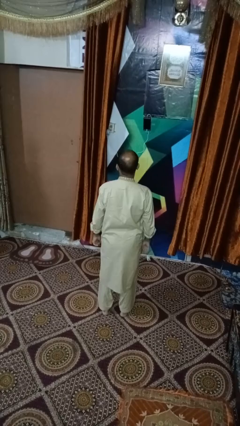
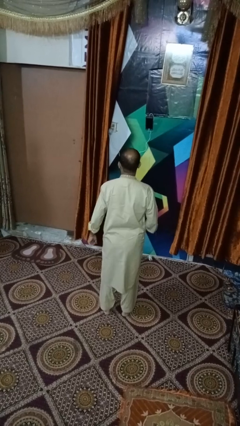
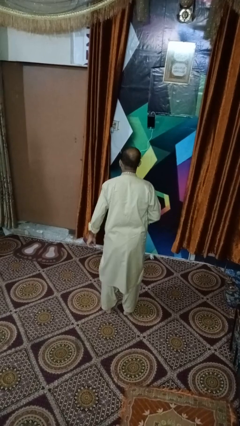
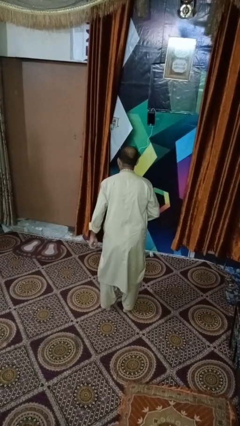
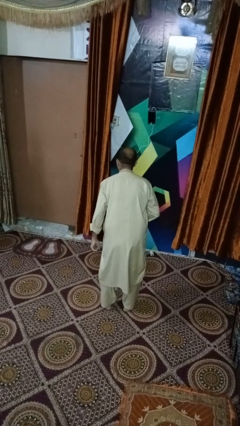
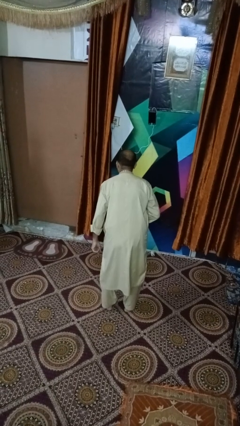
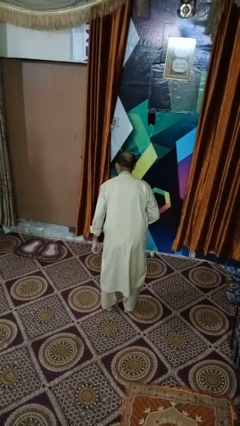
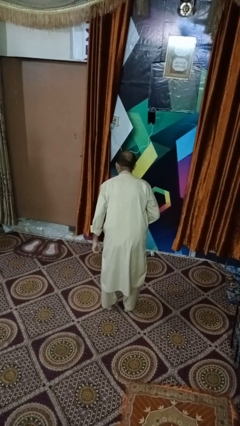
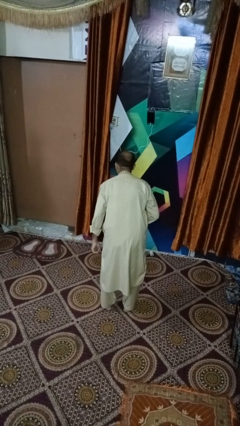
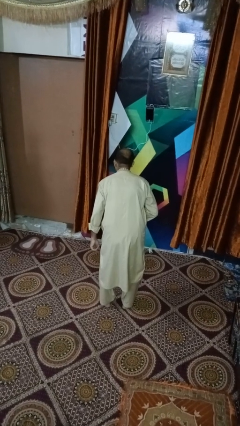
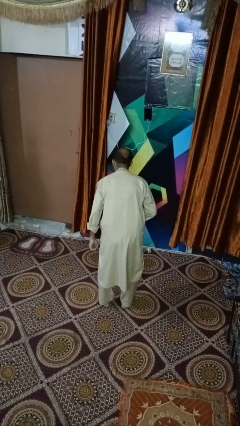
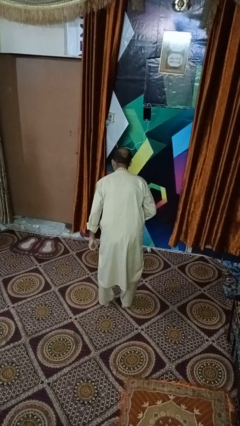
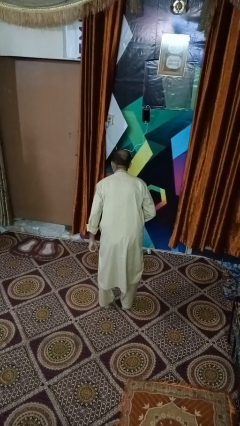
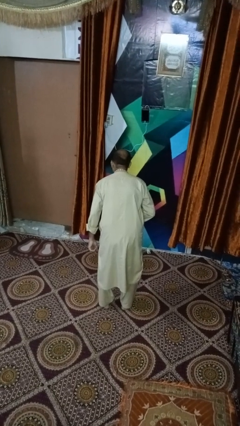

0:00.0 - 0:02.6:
person bows

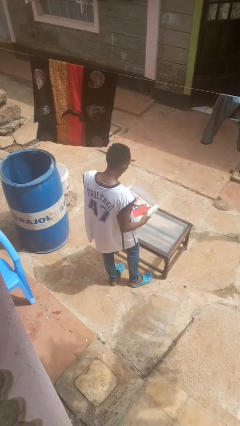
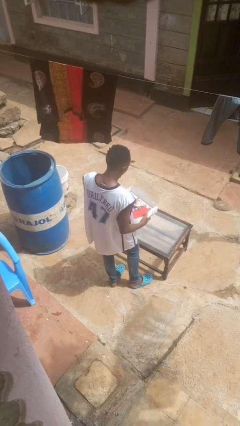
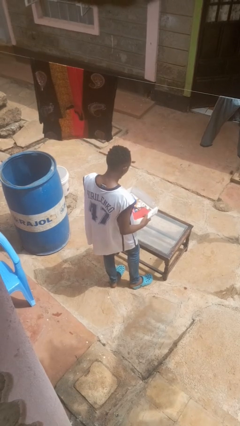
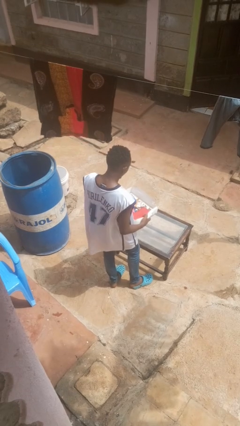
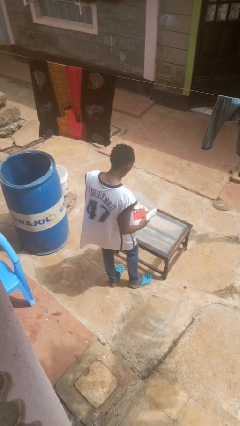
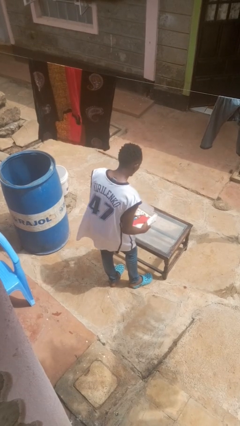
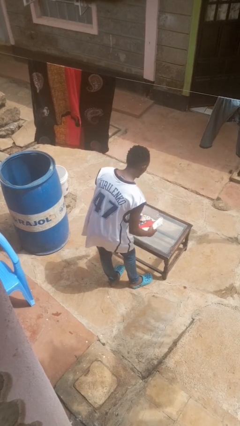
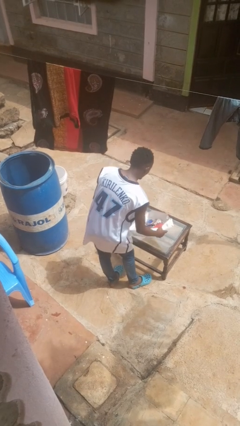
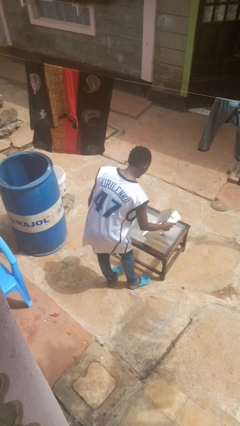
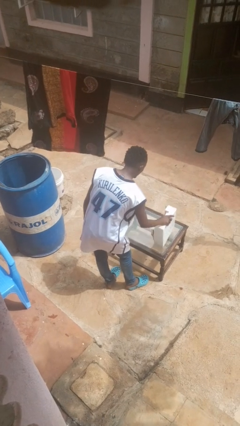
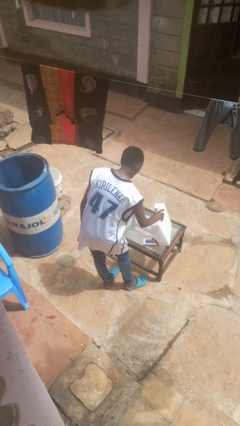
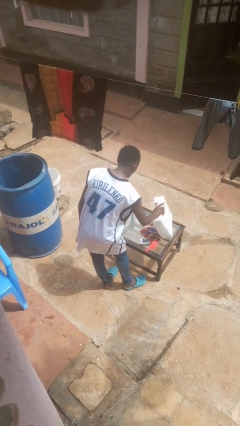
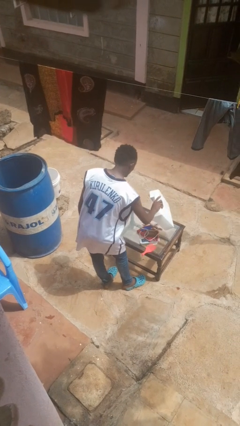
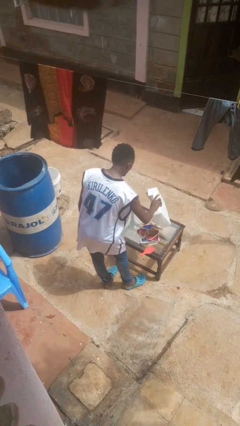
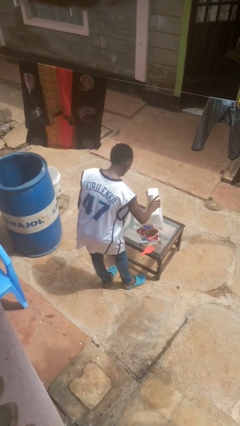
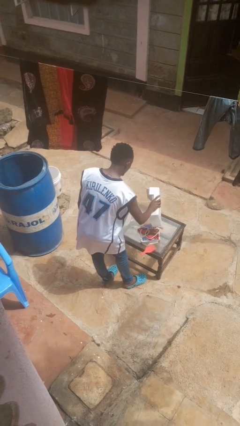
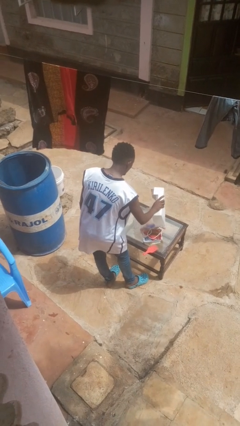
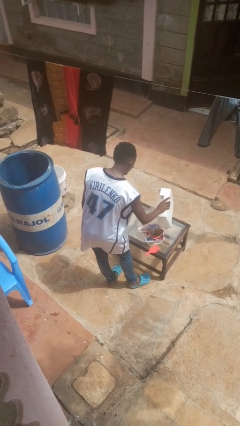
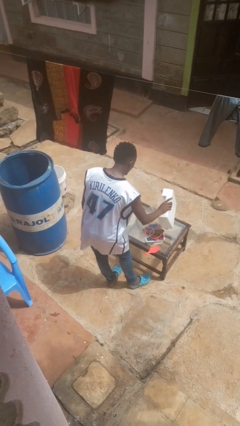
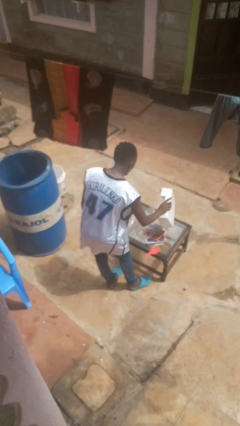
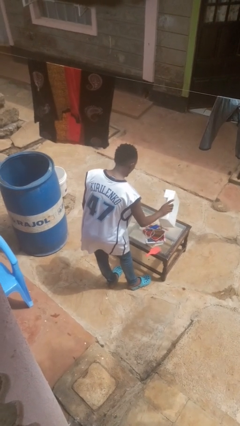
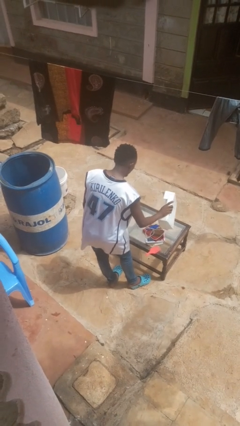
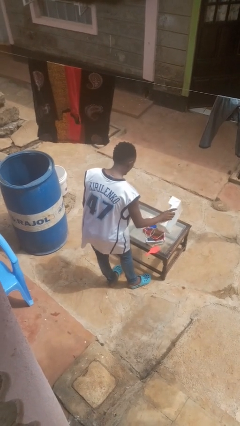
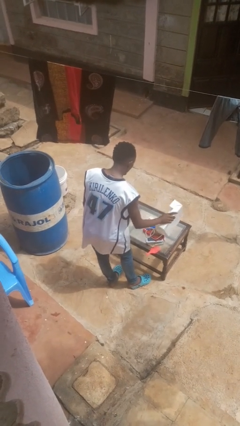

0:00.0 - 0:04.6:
person unloads box onto table

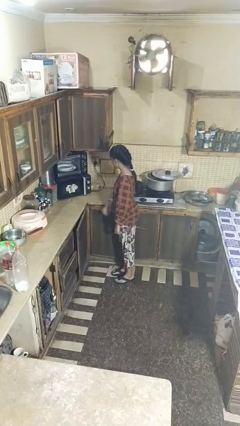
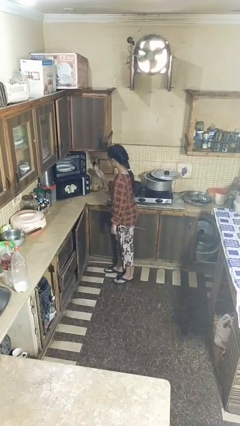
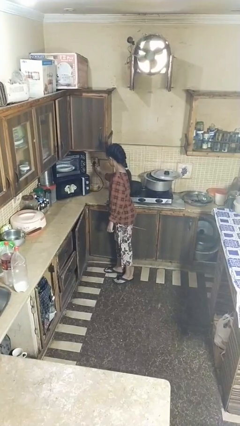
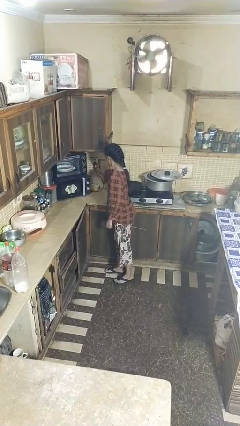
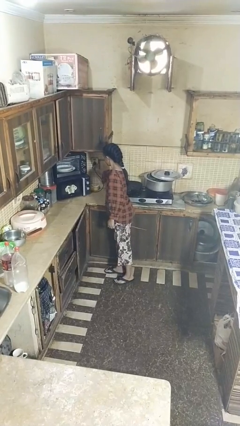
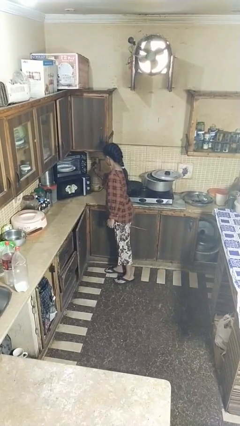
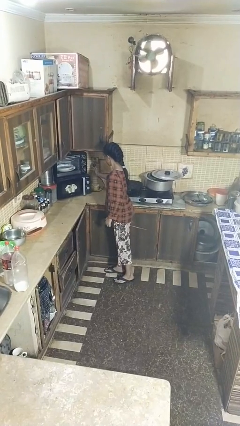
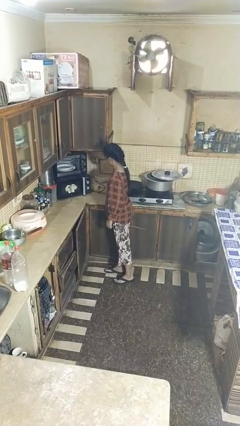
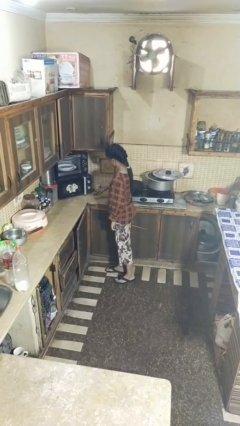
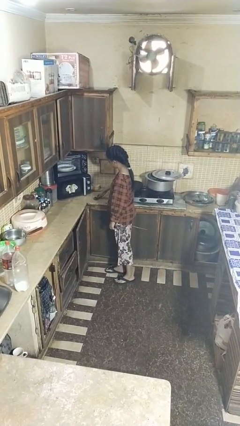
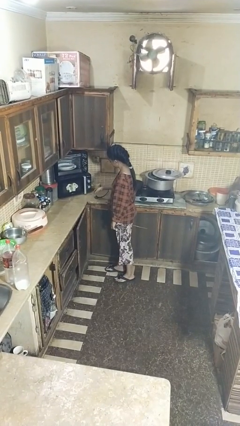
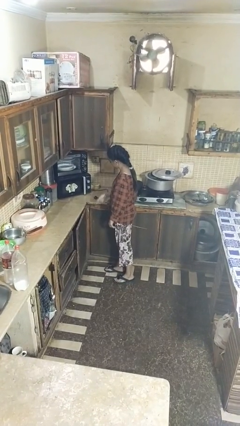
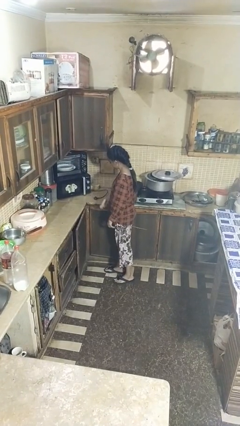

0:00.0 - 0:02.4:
person unplugs from electrical socket

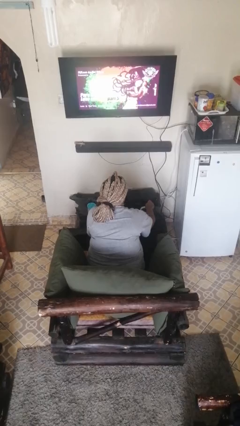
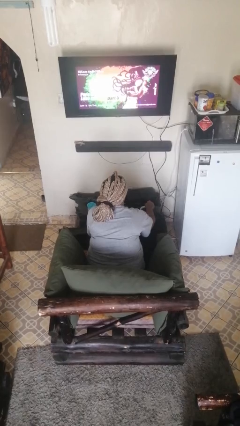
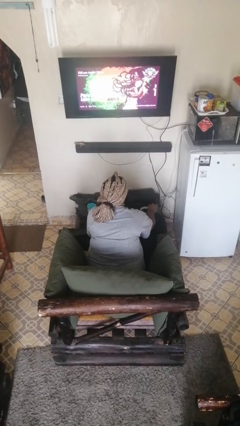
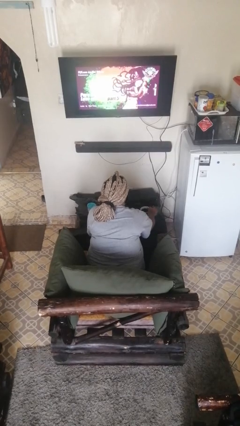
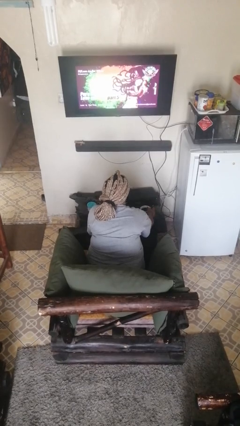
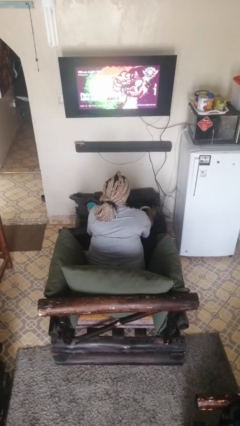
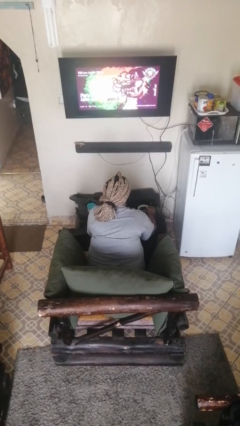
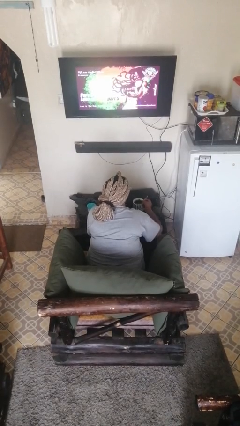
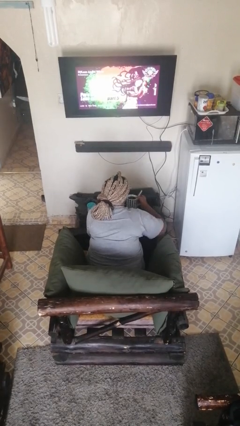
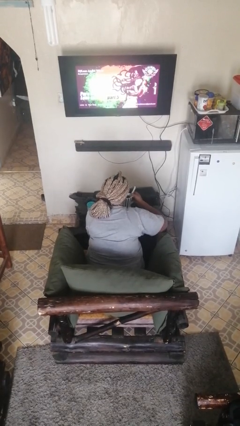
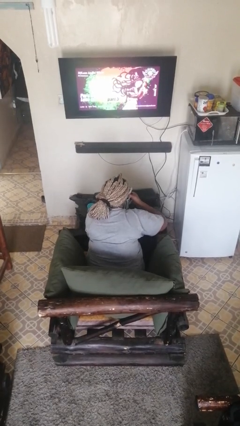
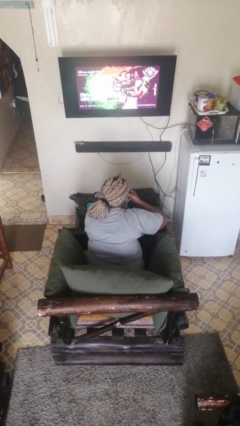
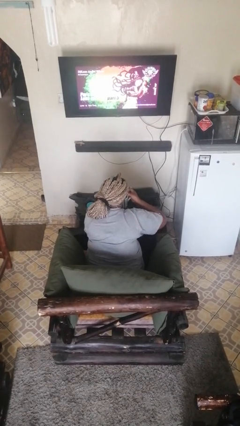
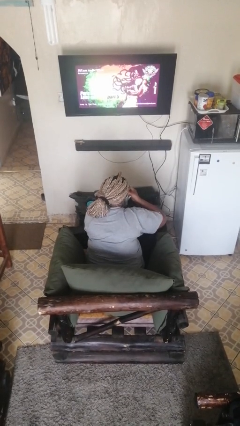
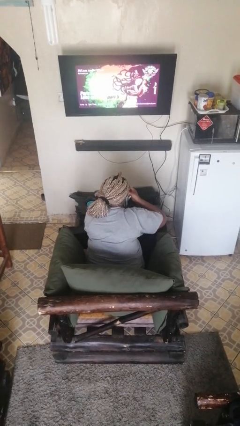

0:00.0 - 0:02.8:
person drinks from mug

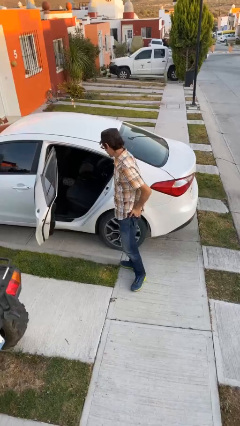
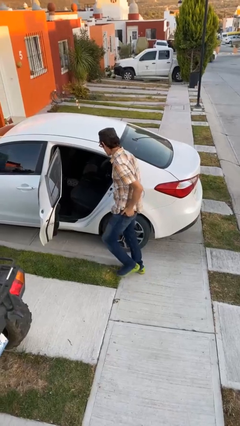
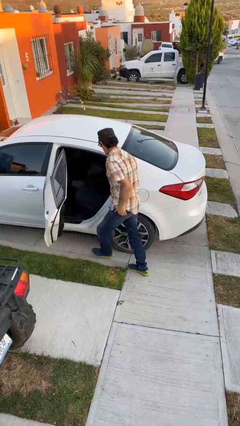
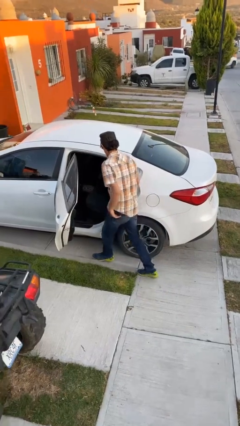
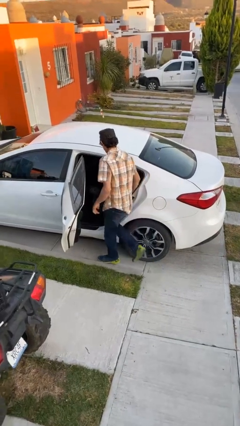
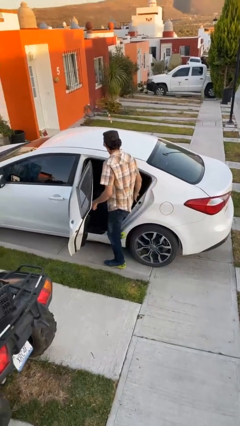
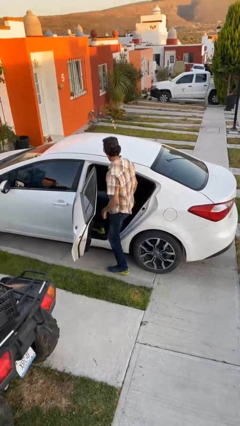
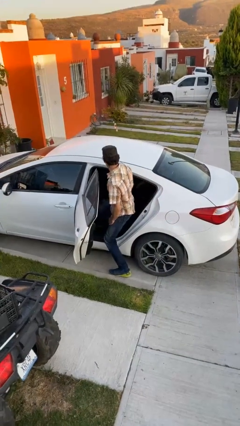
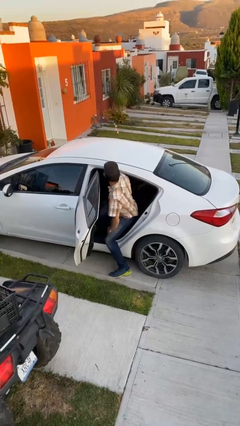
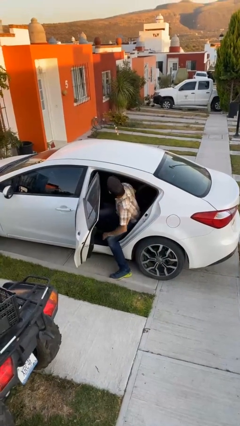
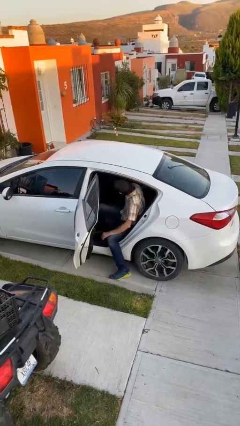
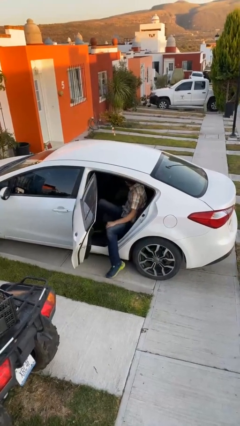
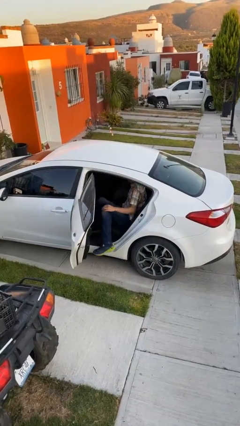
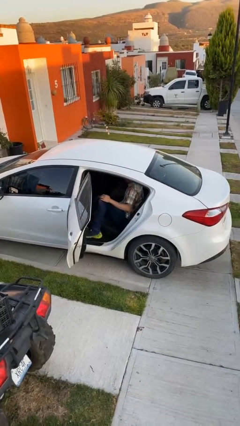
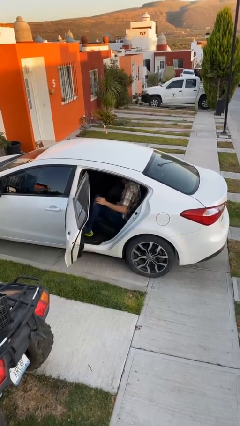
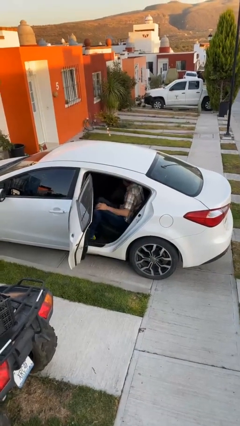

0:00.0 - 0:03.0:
person enters car

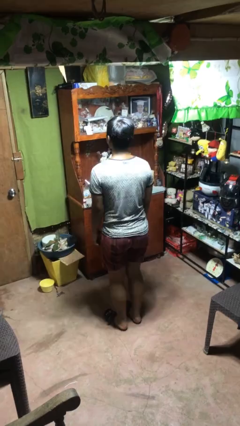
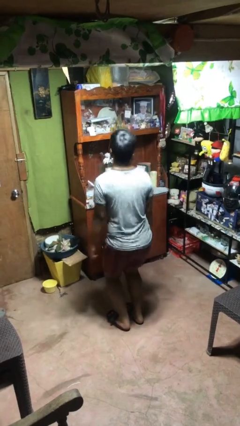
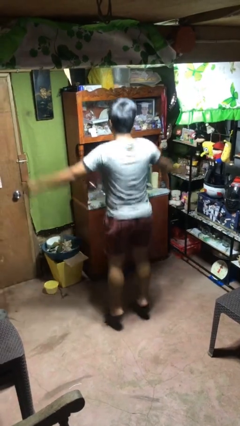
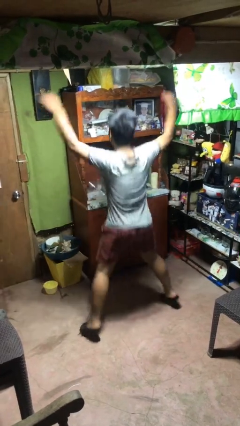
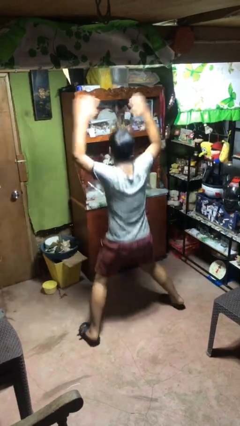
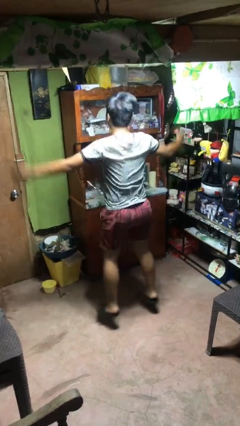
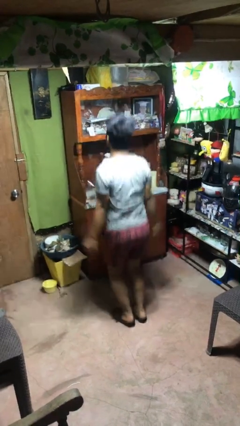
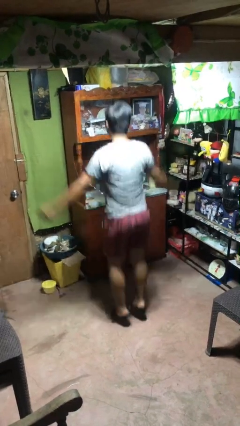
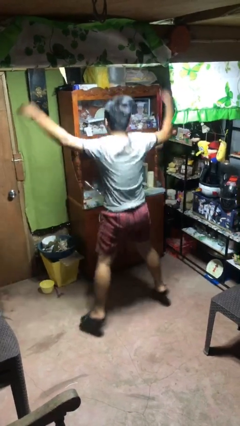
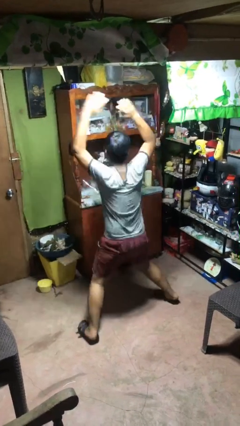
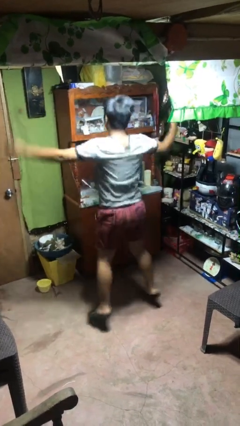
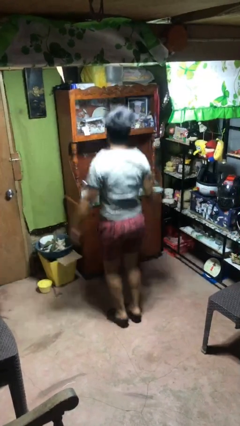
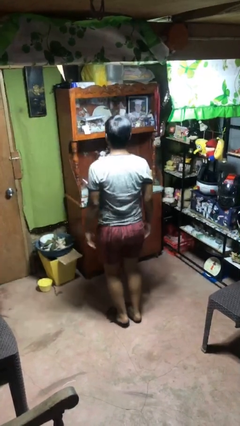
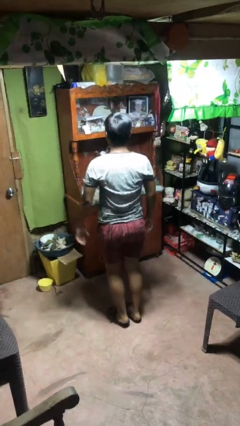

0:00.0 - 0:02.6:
person exercises with jumping jacks
